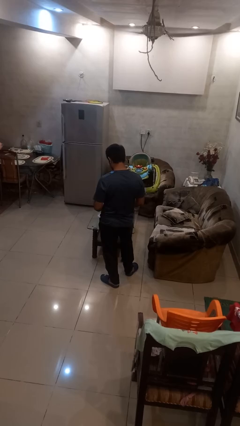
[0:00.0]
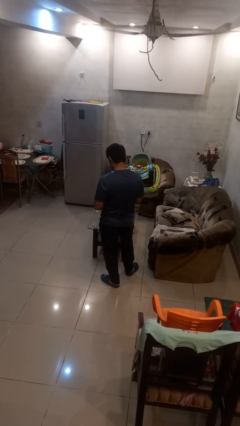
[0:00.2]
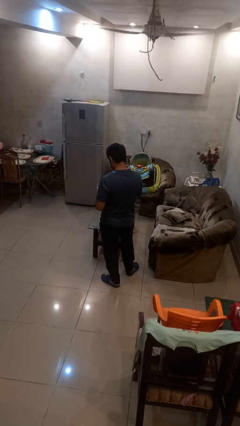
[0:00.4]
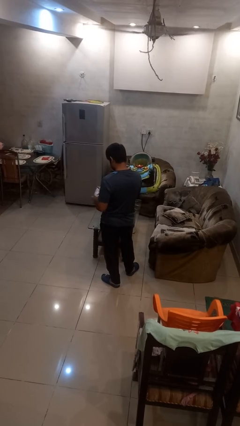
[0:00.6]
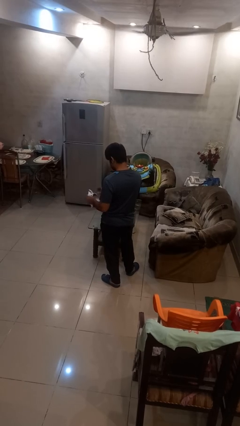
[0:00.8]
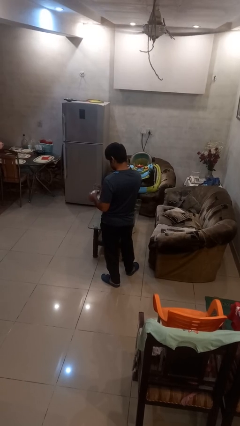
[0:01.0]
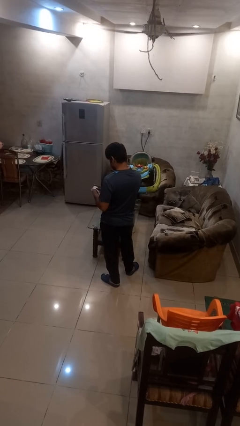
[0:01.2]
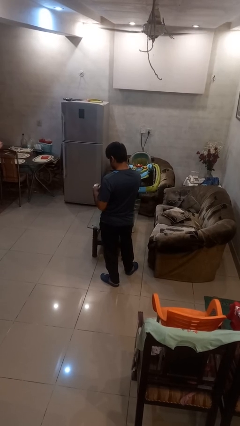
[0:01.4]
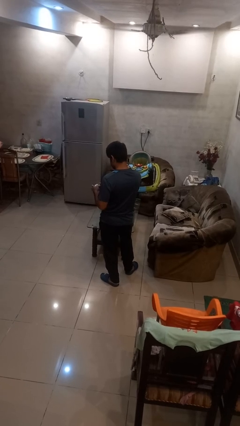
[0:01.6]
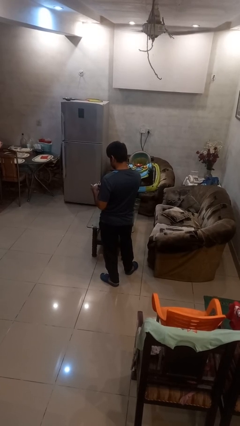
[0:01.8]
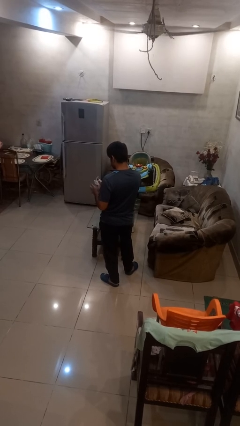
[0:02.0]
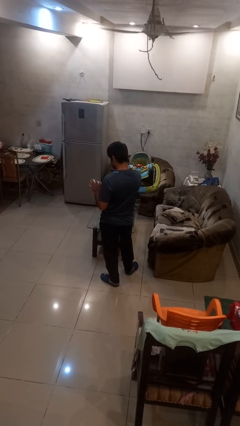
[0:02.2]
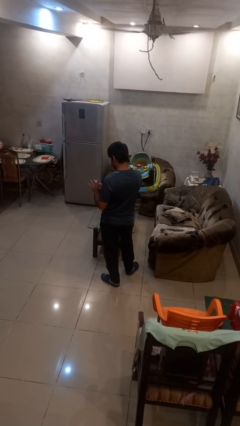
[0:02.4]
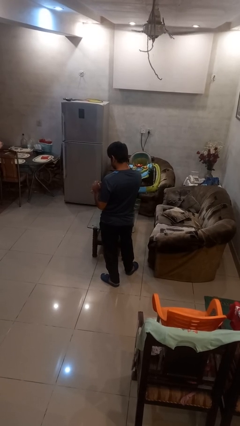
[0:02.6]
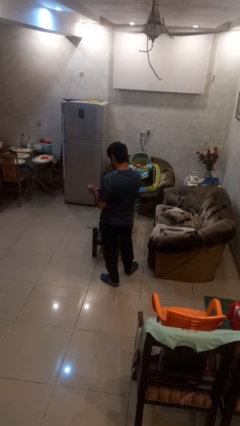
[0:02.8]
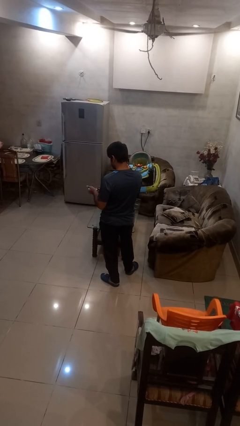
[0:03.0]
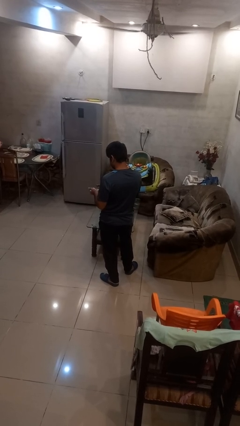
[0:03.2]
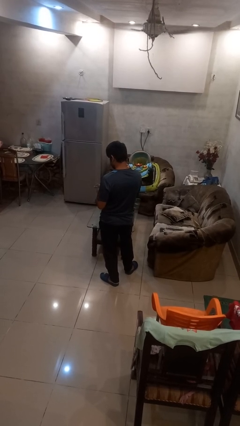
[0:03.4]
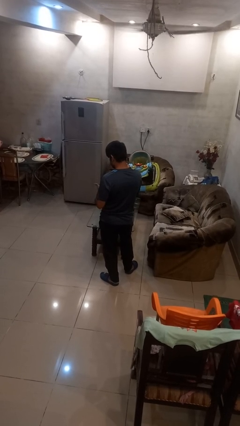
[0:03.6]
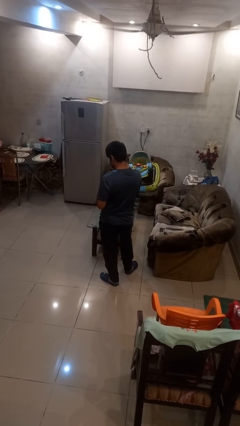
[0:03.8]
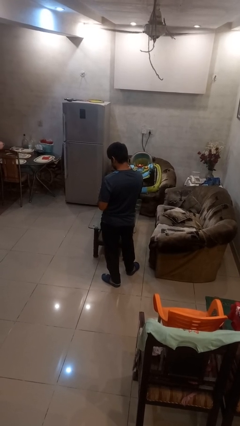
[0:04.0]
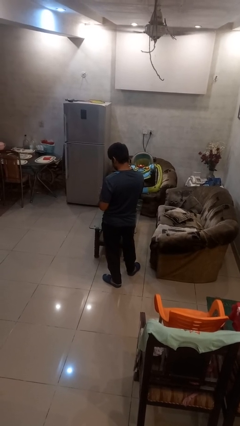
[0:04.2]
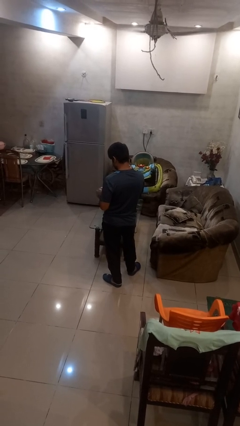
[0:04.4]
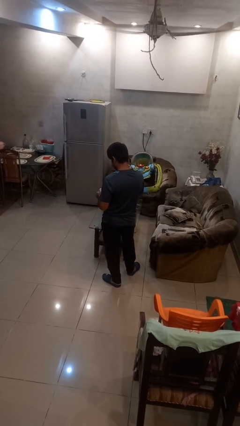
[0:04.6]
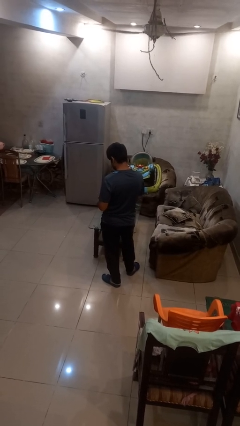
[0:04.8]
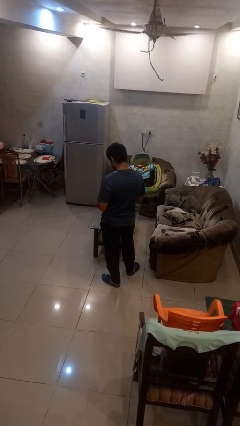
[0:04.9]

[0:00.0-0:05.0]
person crumples paper

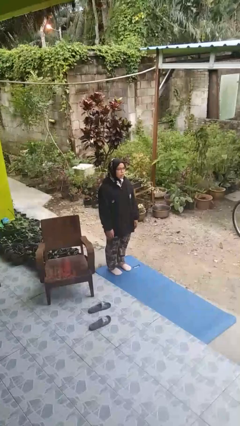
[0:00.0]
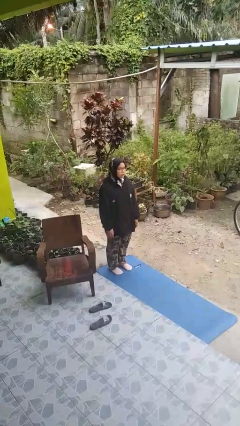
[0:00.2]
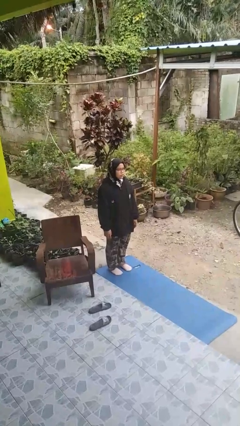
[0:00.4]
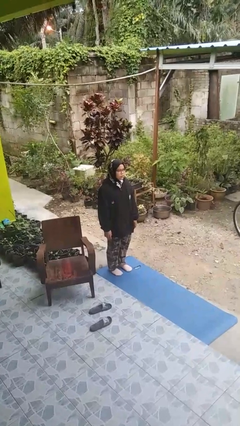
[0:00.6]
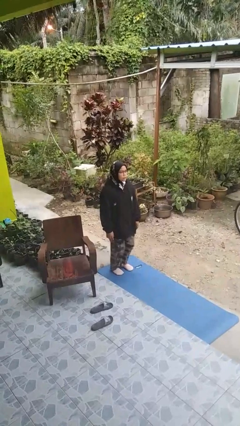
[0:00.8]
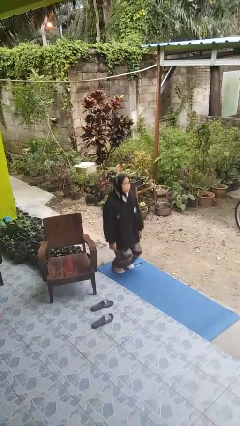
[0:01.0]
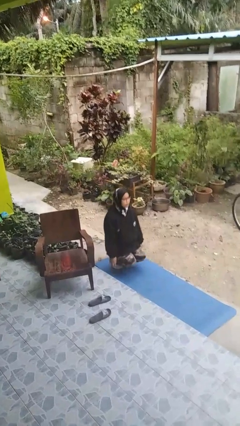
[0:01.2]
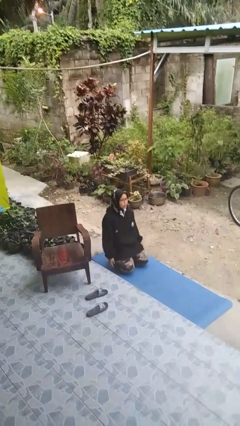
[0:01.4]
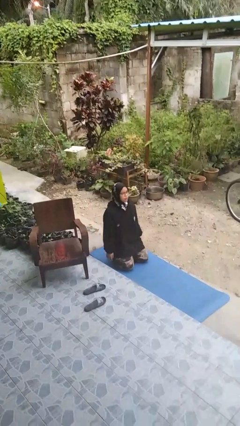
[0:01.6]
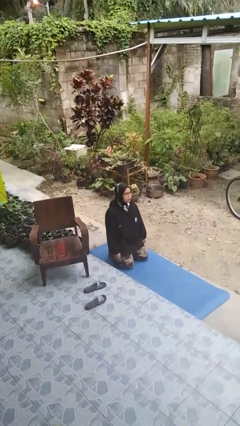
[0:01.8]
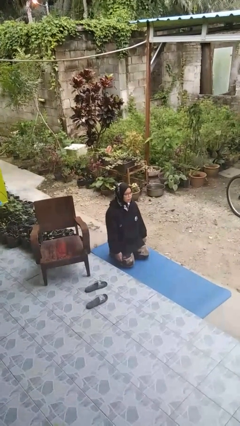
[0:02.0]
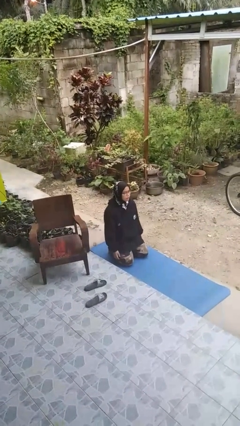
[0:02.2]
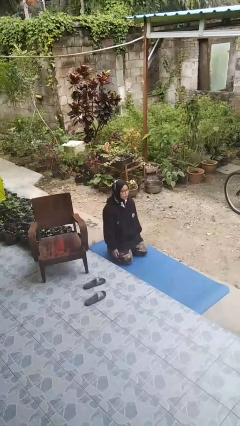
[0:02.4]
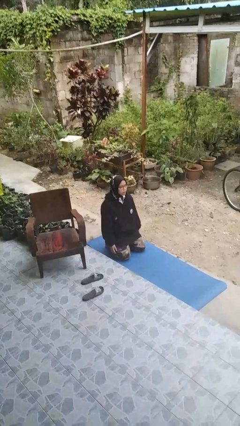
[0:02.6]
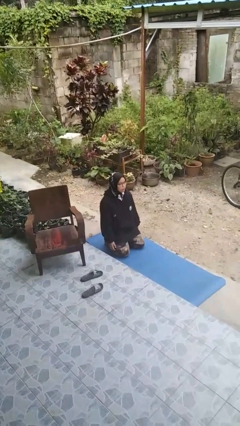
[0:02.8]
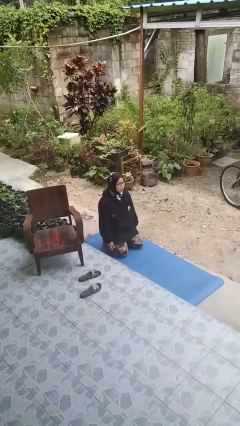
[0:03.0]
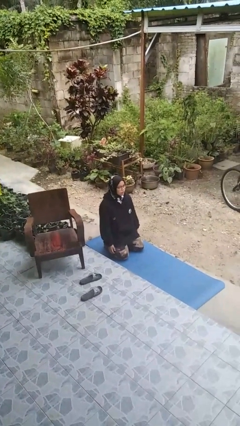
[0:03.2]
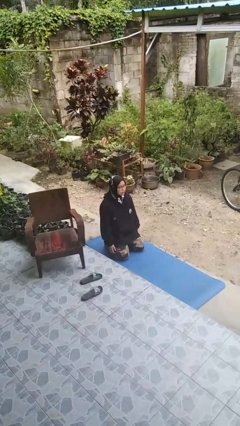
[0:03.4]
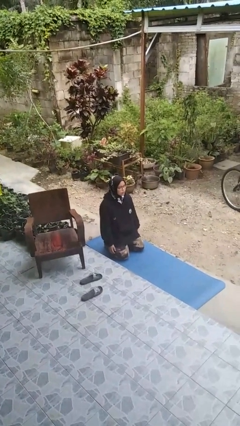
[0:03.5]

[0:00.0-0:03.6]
person kneels

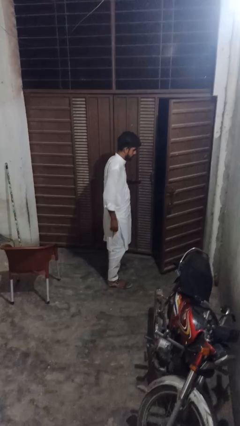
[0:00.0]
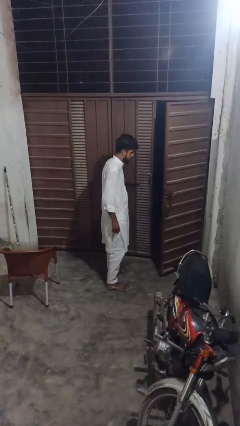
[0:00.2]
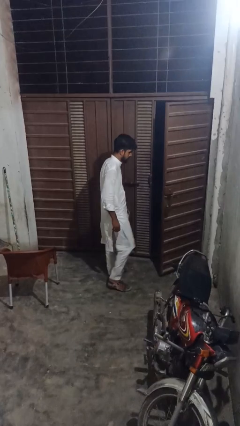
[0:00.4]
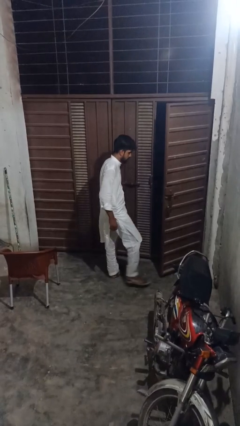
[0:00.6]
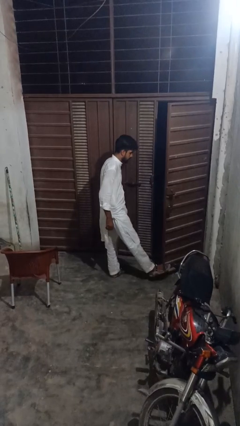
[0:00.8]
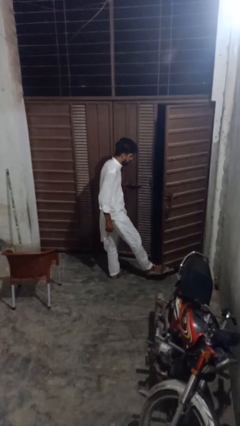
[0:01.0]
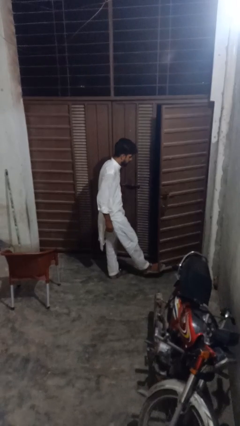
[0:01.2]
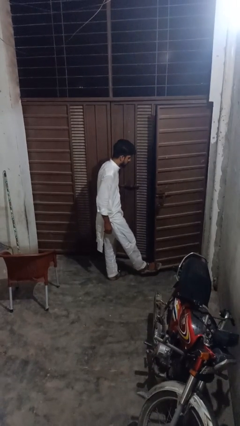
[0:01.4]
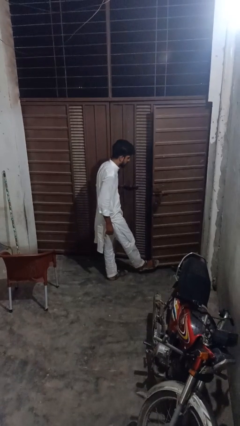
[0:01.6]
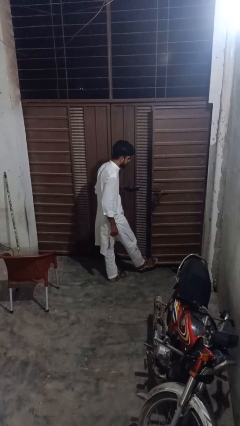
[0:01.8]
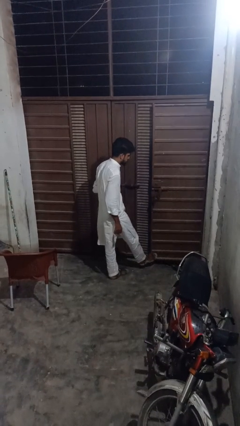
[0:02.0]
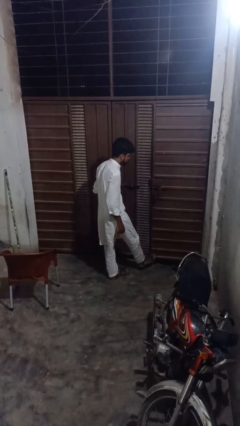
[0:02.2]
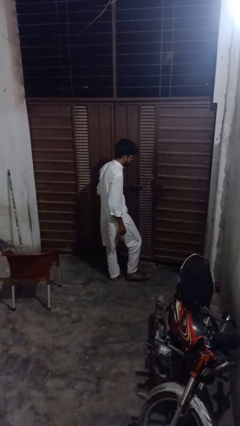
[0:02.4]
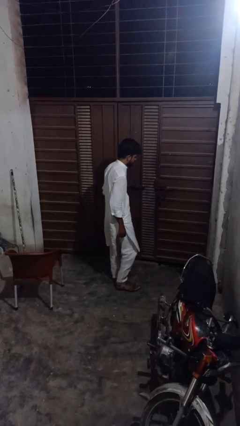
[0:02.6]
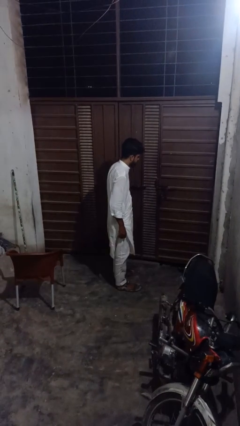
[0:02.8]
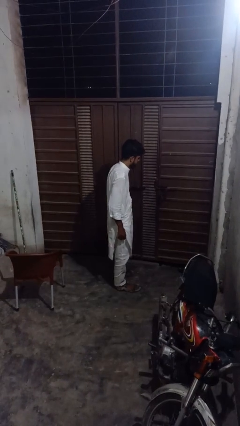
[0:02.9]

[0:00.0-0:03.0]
person closes door with foot

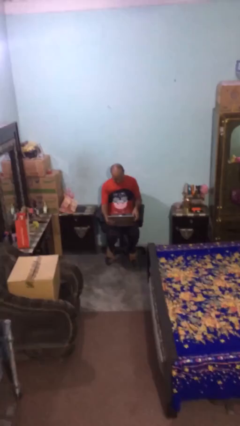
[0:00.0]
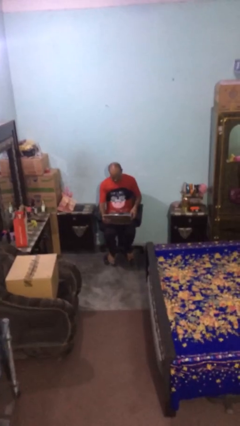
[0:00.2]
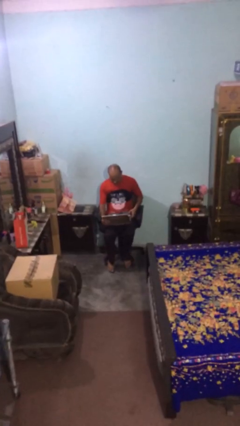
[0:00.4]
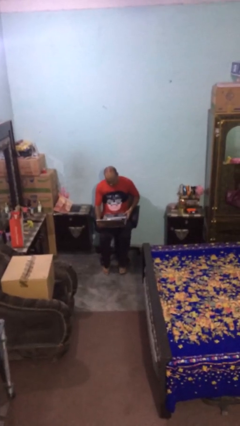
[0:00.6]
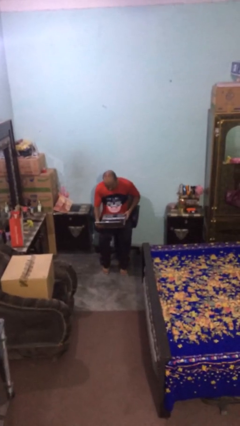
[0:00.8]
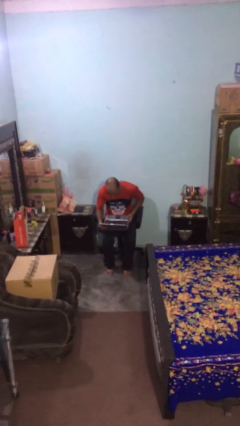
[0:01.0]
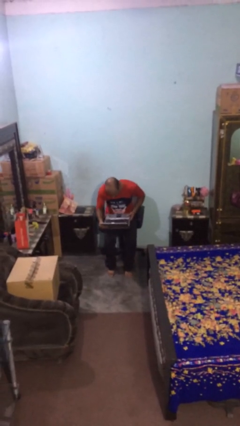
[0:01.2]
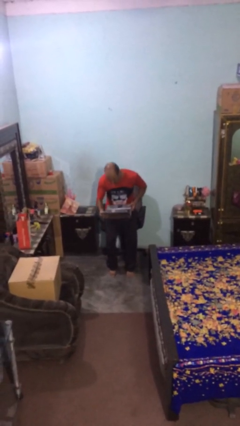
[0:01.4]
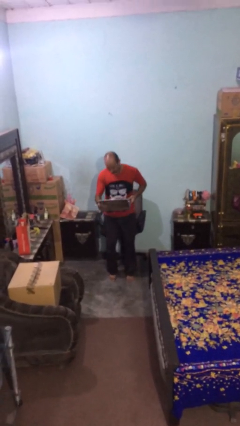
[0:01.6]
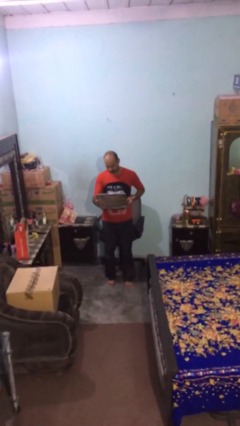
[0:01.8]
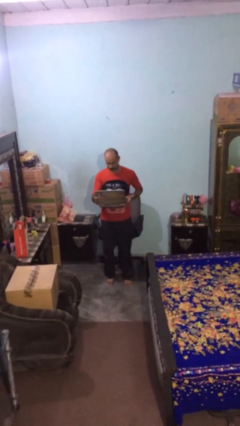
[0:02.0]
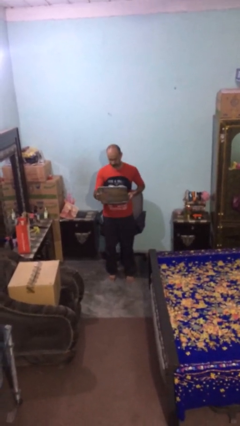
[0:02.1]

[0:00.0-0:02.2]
person stands up

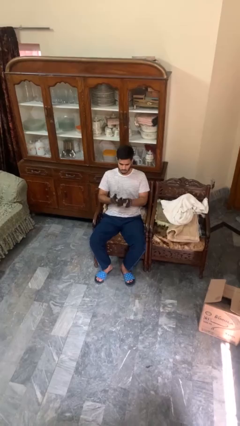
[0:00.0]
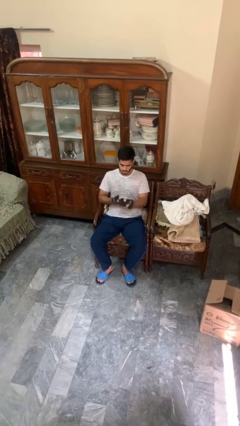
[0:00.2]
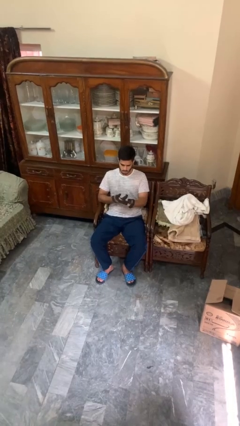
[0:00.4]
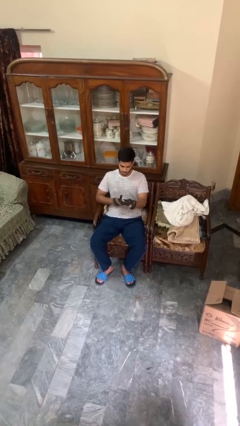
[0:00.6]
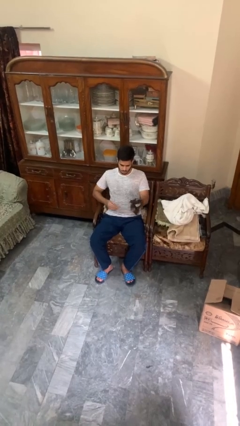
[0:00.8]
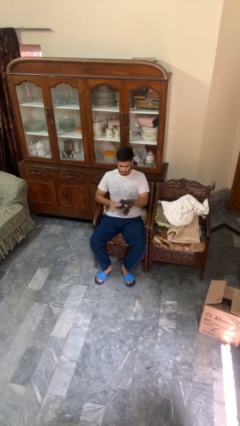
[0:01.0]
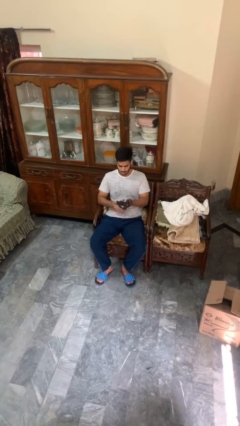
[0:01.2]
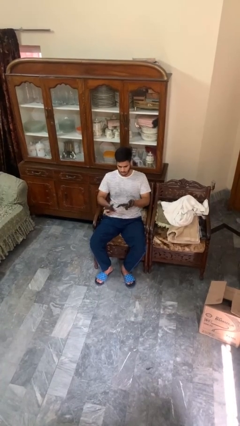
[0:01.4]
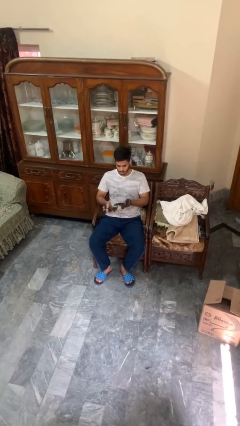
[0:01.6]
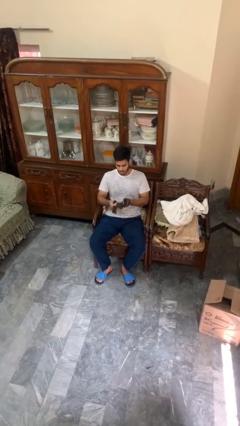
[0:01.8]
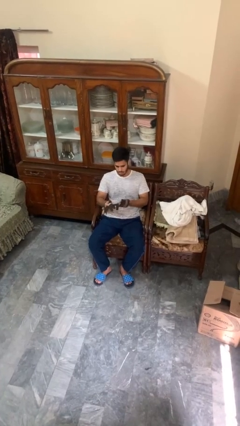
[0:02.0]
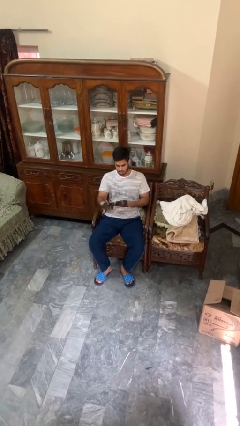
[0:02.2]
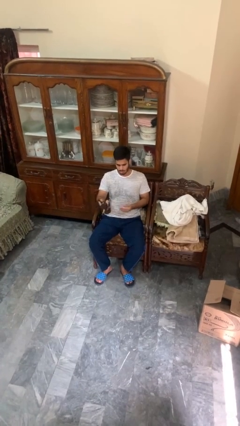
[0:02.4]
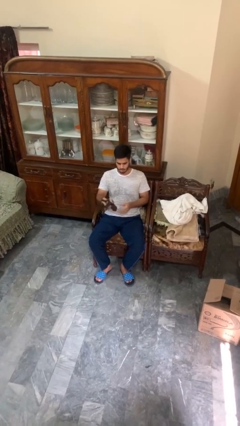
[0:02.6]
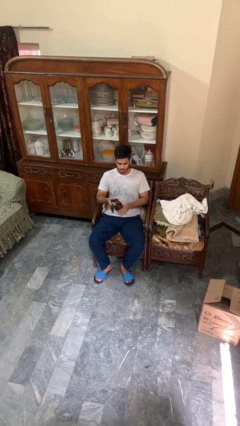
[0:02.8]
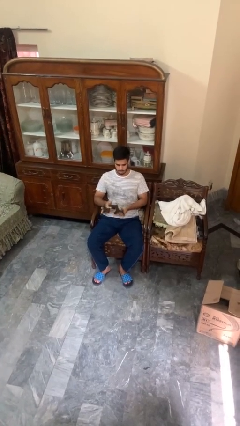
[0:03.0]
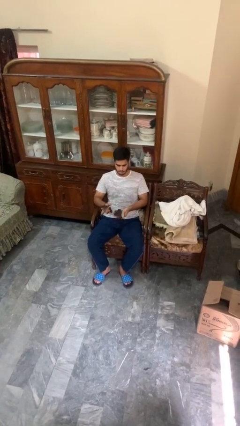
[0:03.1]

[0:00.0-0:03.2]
person takes off gloves
